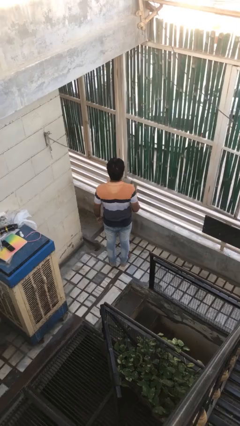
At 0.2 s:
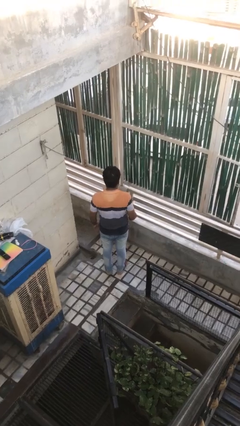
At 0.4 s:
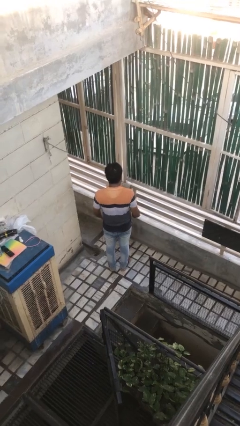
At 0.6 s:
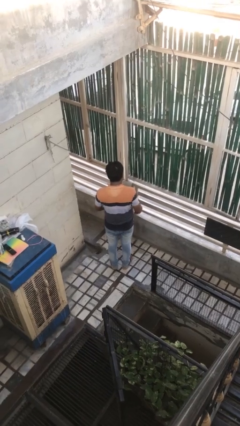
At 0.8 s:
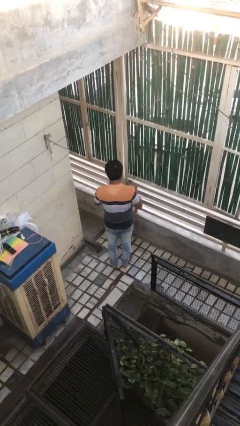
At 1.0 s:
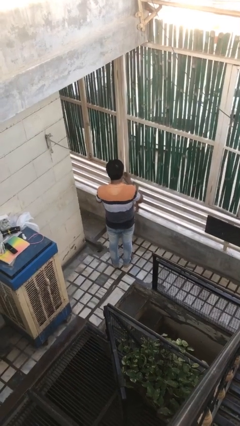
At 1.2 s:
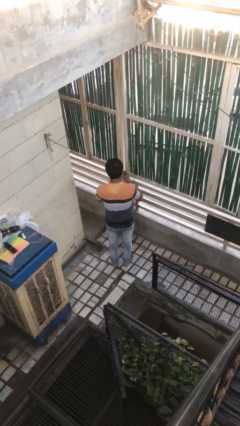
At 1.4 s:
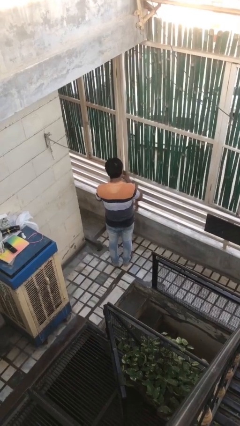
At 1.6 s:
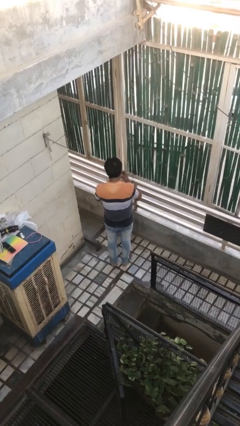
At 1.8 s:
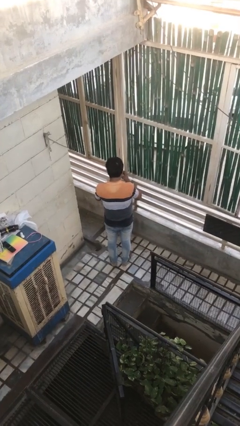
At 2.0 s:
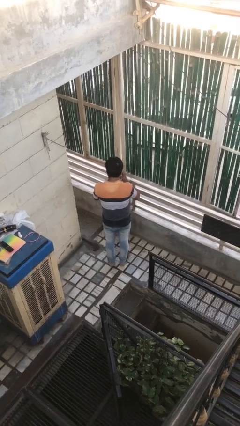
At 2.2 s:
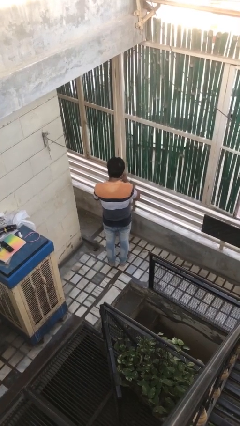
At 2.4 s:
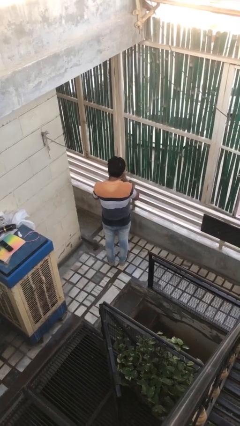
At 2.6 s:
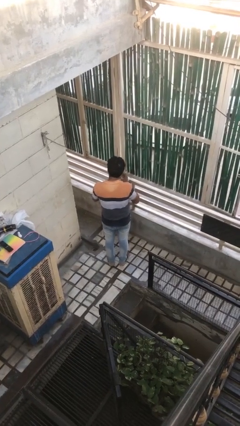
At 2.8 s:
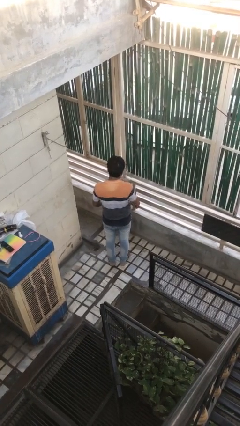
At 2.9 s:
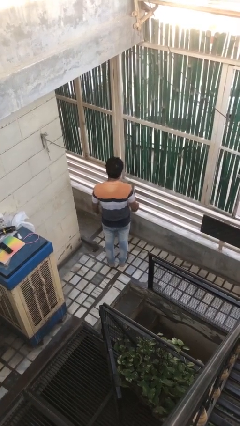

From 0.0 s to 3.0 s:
person clips fingernails

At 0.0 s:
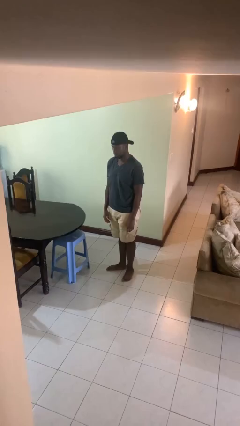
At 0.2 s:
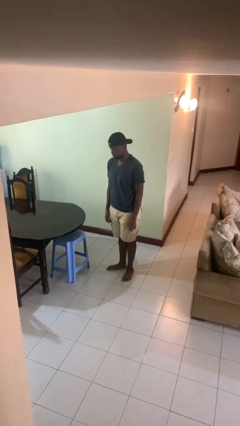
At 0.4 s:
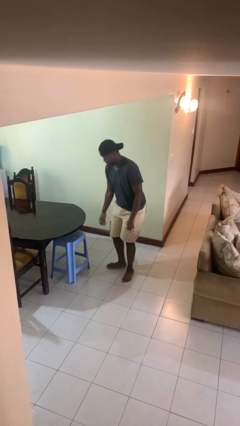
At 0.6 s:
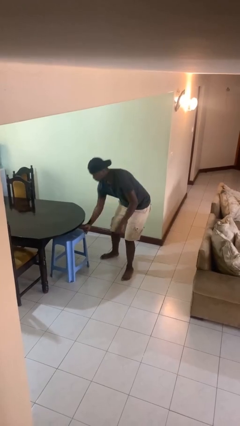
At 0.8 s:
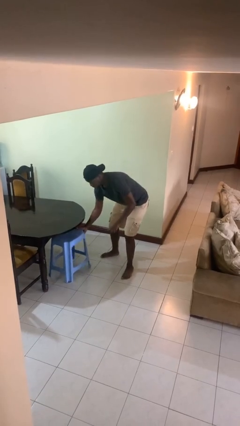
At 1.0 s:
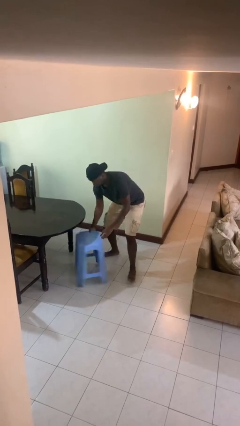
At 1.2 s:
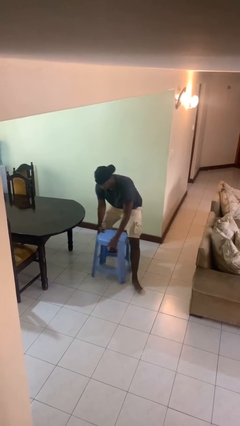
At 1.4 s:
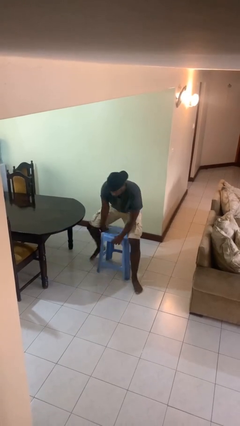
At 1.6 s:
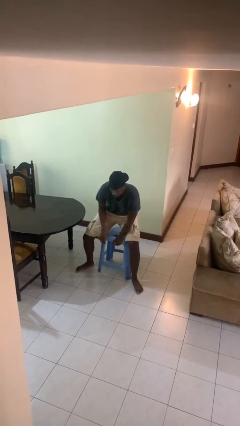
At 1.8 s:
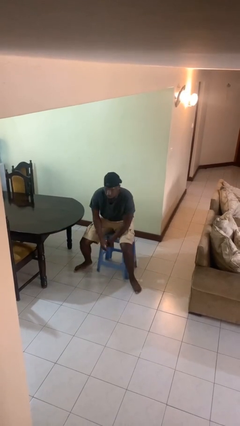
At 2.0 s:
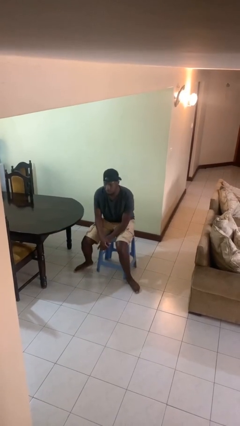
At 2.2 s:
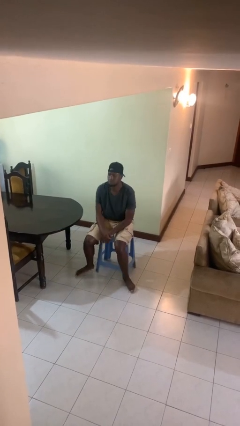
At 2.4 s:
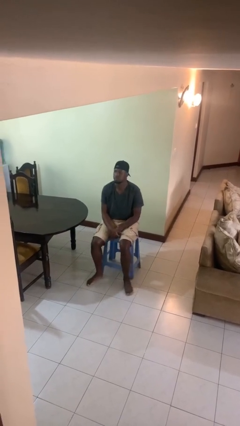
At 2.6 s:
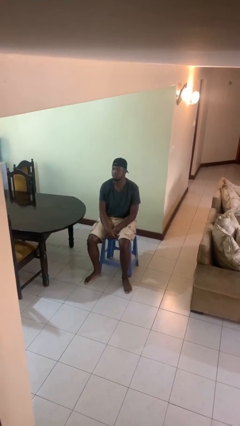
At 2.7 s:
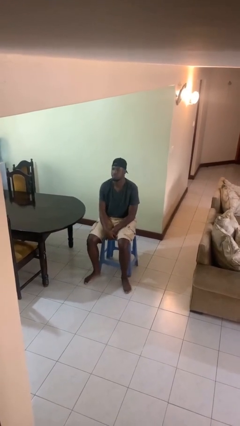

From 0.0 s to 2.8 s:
person sits down

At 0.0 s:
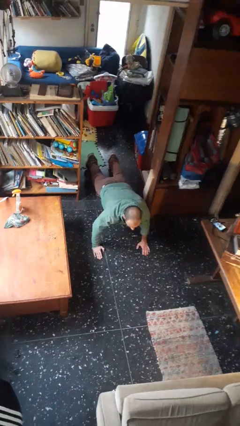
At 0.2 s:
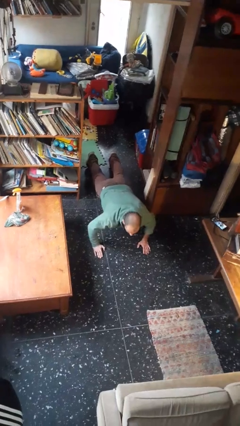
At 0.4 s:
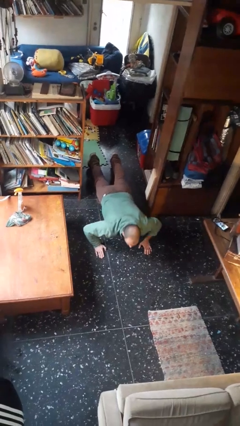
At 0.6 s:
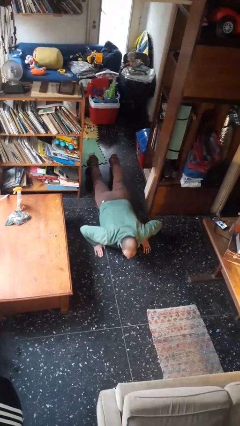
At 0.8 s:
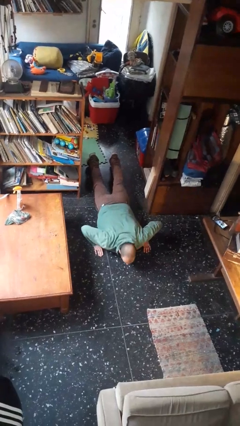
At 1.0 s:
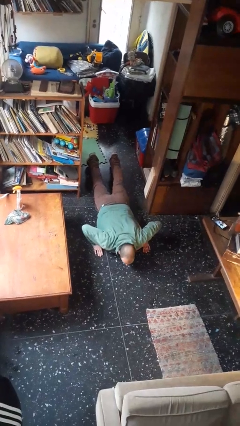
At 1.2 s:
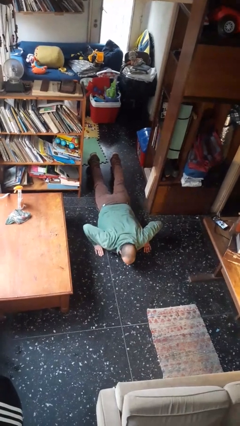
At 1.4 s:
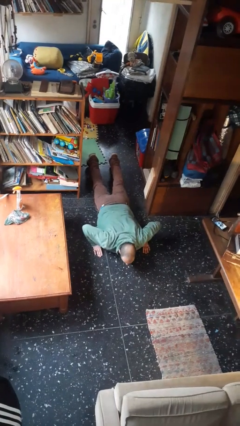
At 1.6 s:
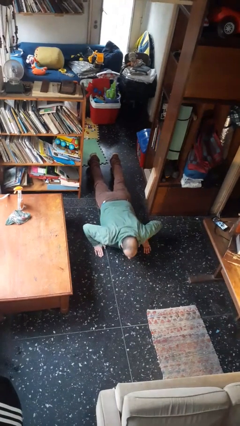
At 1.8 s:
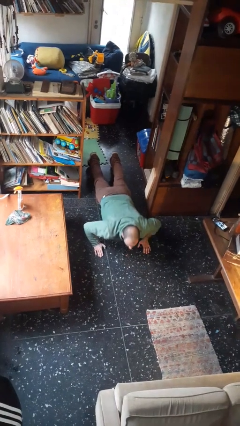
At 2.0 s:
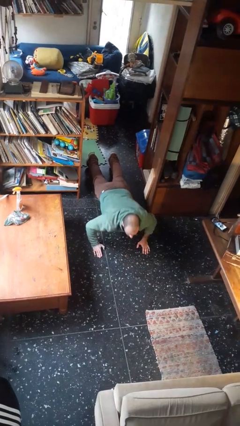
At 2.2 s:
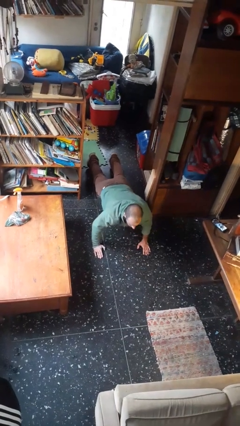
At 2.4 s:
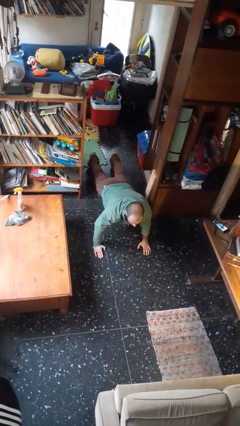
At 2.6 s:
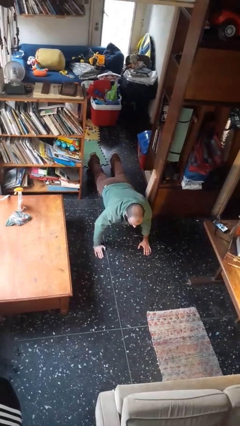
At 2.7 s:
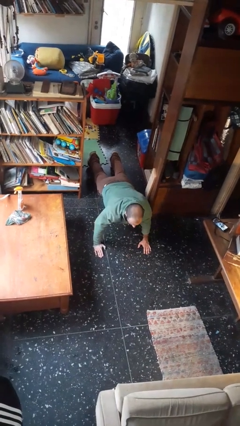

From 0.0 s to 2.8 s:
person exercises with pushup

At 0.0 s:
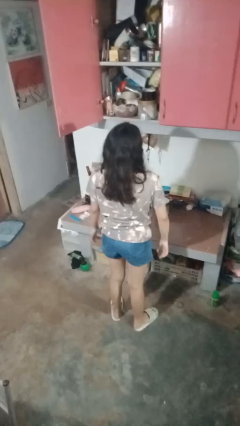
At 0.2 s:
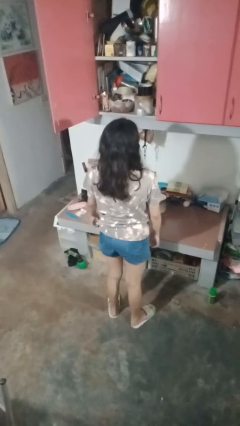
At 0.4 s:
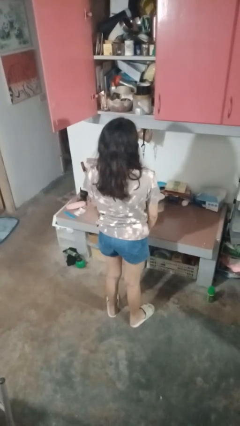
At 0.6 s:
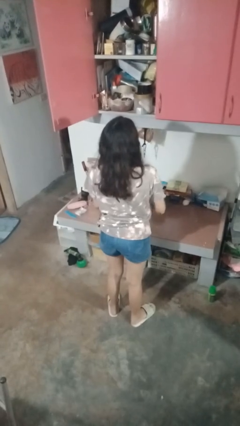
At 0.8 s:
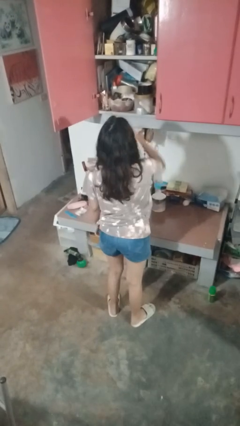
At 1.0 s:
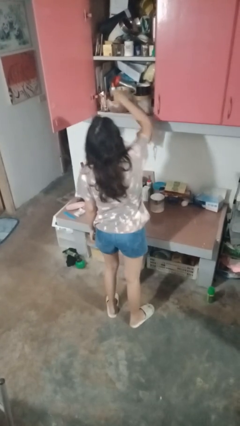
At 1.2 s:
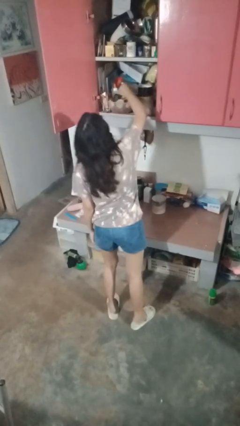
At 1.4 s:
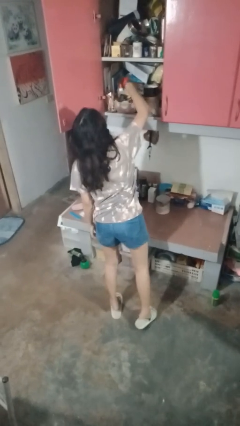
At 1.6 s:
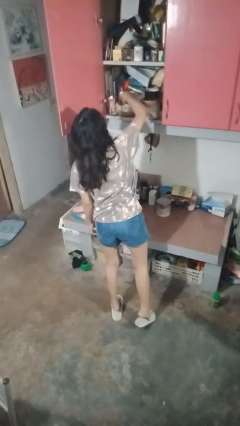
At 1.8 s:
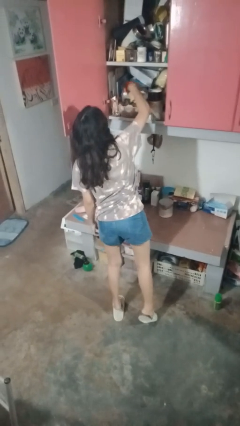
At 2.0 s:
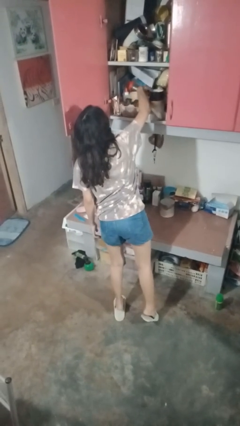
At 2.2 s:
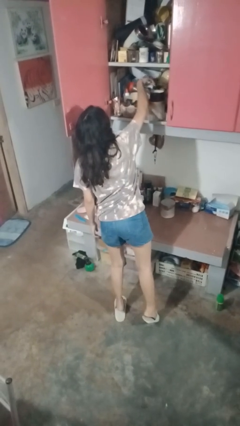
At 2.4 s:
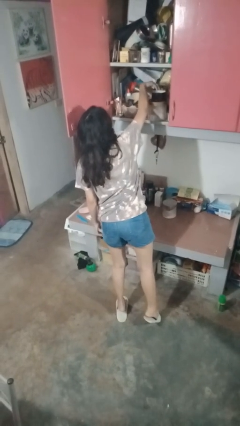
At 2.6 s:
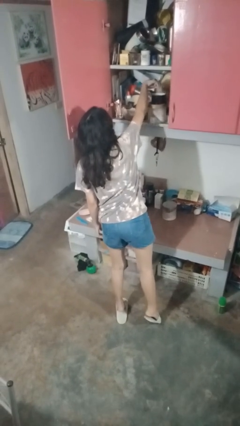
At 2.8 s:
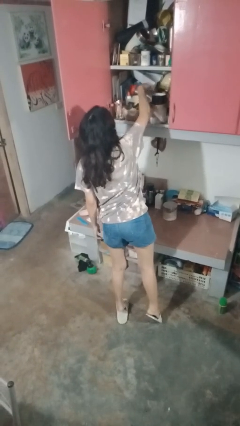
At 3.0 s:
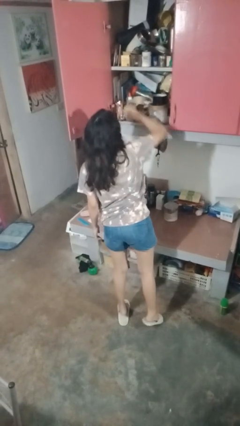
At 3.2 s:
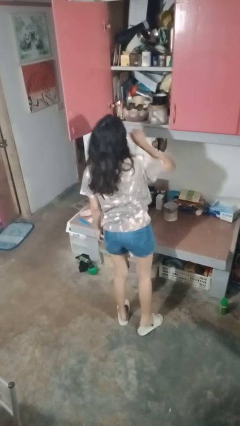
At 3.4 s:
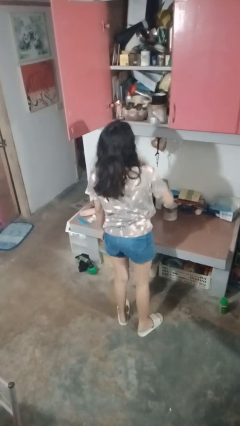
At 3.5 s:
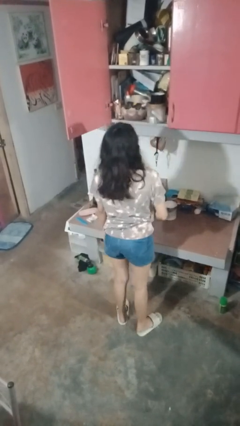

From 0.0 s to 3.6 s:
person searches in cabinet

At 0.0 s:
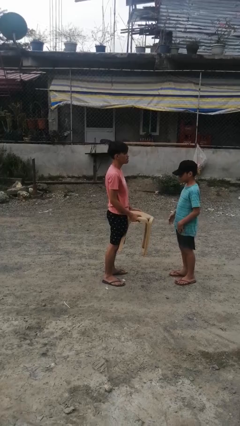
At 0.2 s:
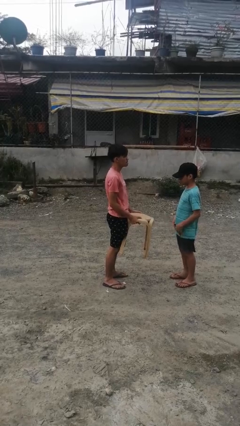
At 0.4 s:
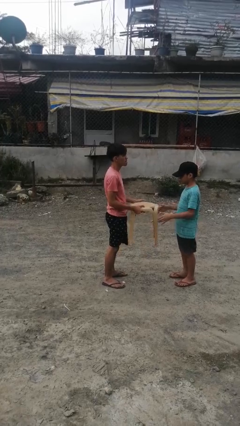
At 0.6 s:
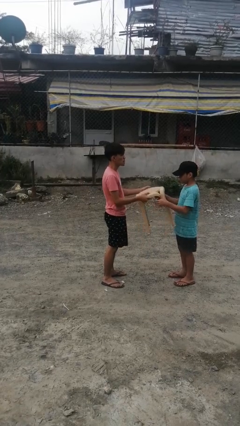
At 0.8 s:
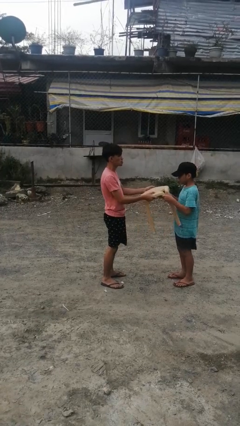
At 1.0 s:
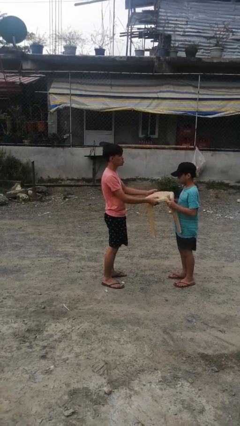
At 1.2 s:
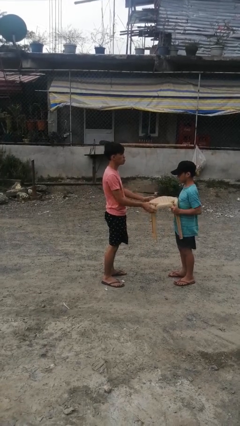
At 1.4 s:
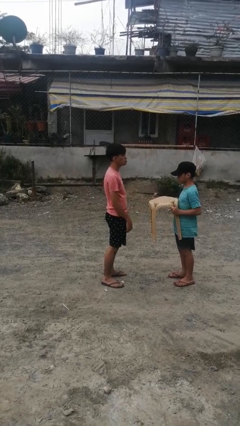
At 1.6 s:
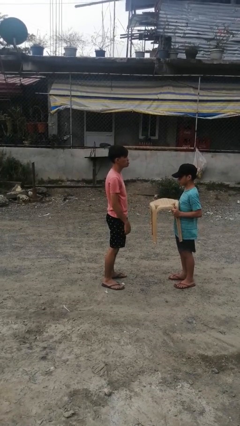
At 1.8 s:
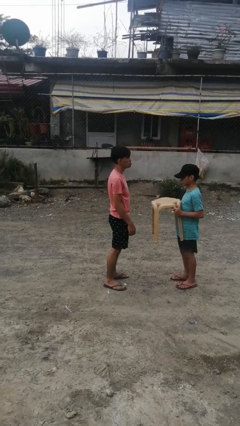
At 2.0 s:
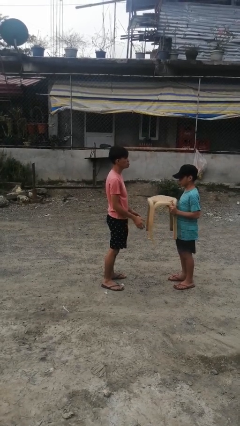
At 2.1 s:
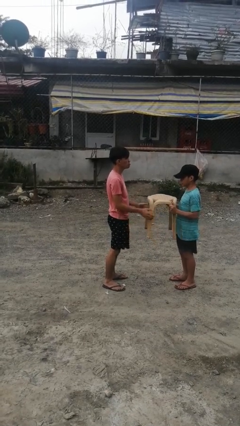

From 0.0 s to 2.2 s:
person transfers object to person

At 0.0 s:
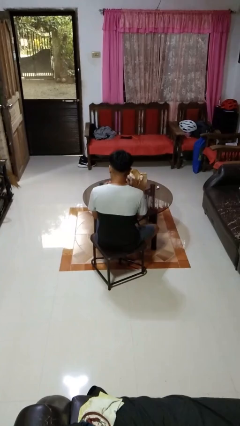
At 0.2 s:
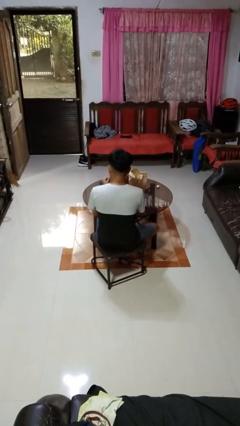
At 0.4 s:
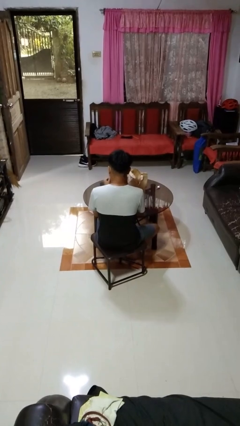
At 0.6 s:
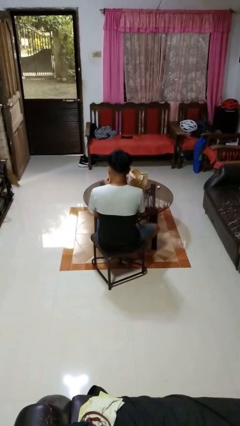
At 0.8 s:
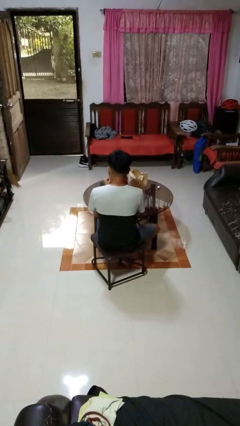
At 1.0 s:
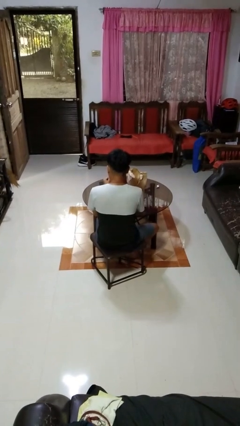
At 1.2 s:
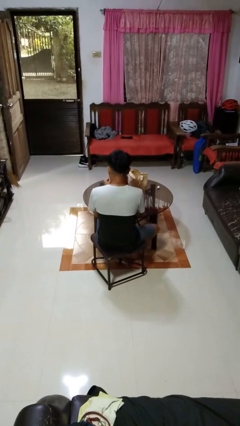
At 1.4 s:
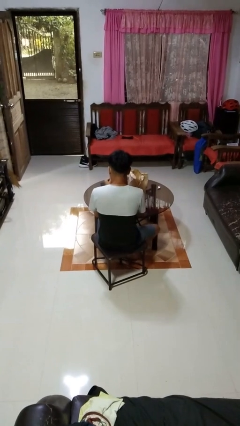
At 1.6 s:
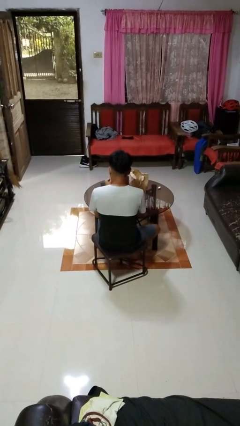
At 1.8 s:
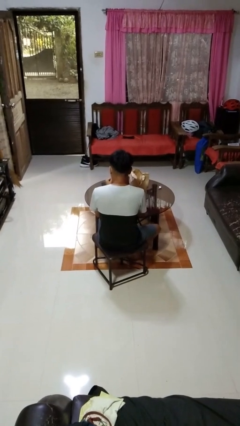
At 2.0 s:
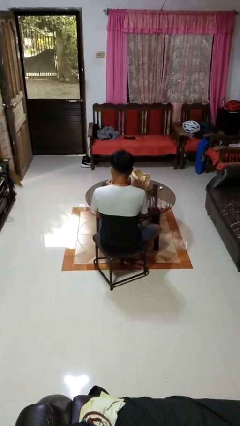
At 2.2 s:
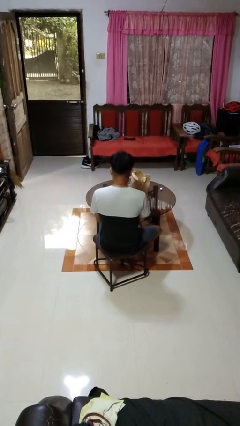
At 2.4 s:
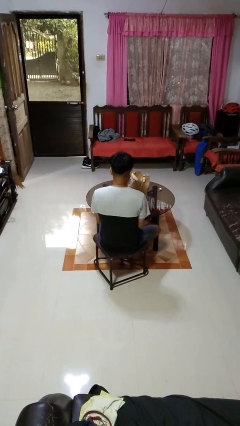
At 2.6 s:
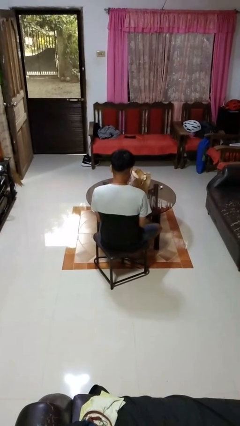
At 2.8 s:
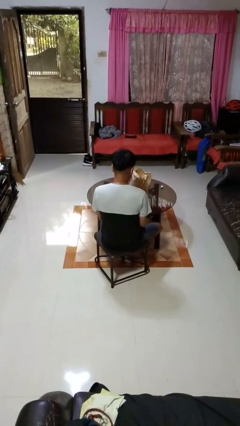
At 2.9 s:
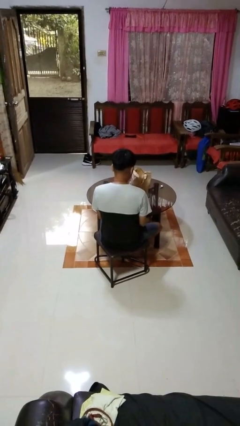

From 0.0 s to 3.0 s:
person paints fingernails
